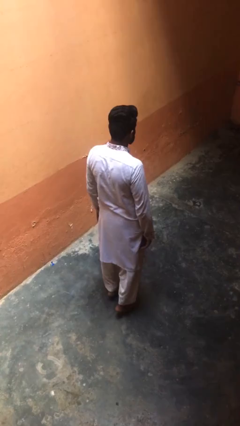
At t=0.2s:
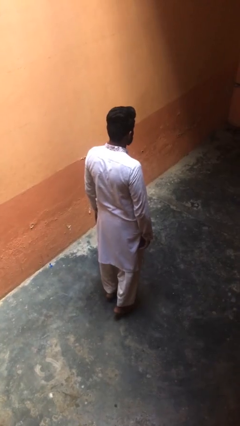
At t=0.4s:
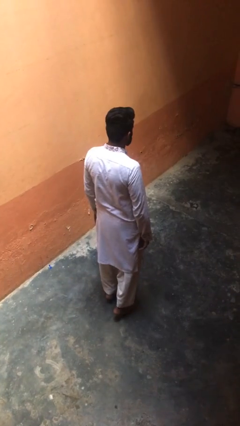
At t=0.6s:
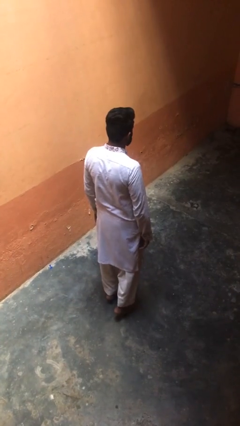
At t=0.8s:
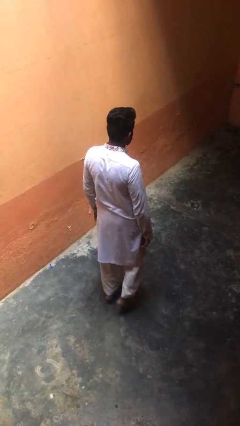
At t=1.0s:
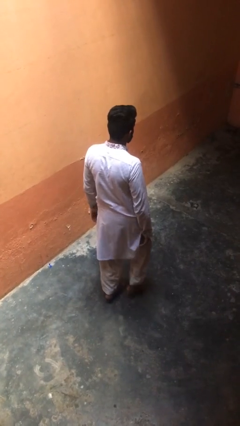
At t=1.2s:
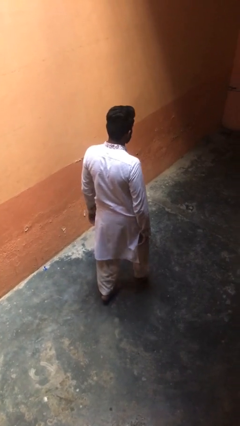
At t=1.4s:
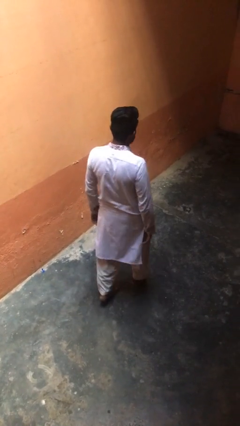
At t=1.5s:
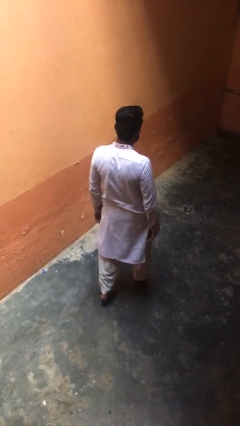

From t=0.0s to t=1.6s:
person walks tiptoe

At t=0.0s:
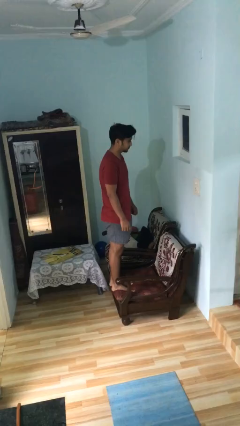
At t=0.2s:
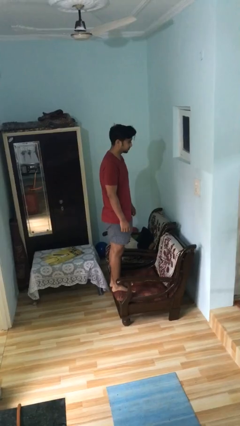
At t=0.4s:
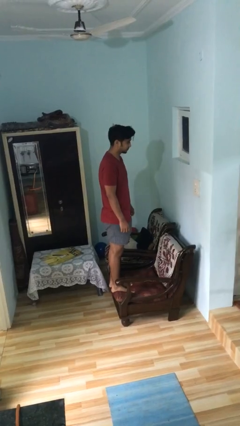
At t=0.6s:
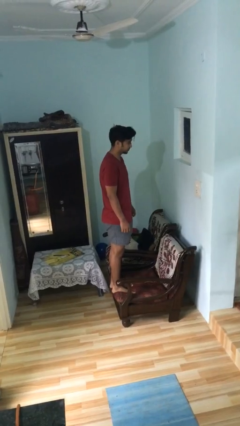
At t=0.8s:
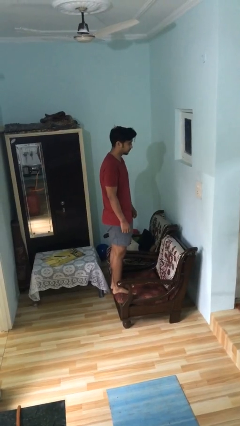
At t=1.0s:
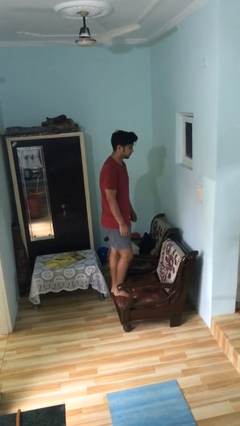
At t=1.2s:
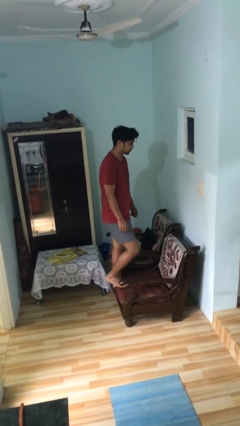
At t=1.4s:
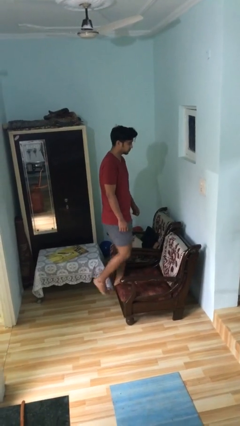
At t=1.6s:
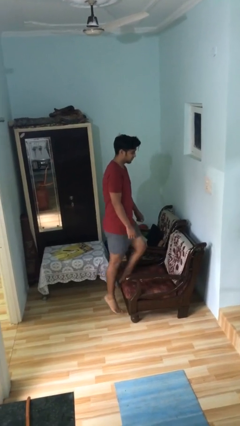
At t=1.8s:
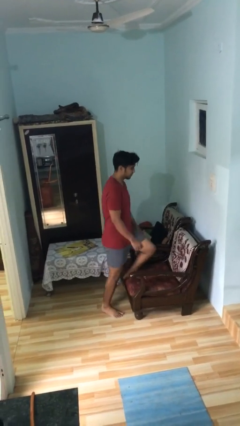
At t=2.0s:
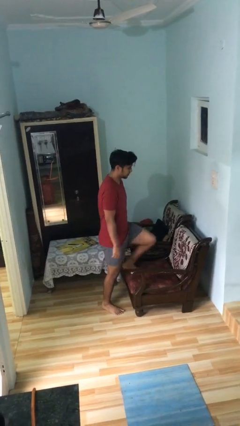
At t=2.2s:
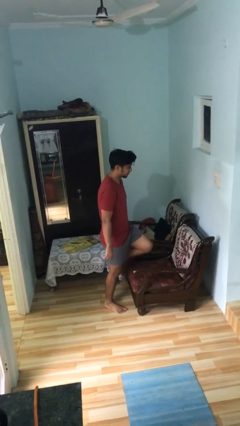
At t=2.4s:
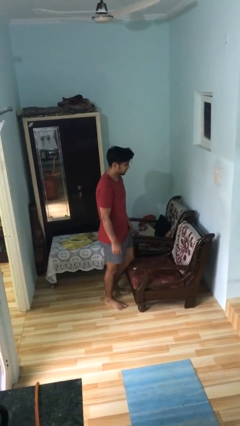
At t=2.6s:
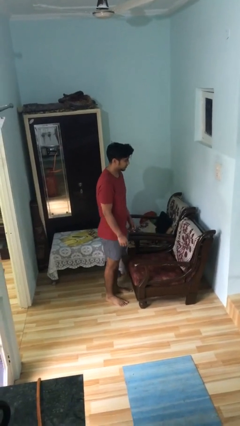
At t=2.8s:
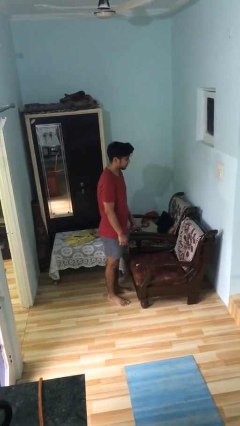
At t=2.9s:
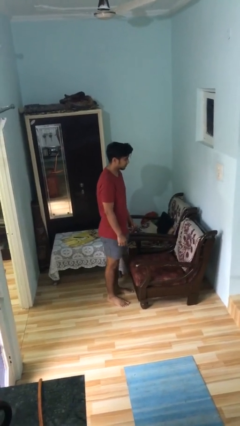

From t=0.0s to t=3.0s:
person climbs off couch

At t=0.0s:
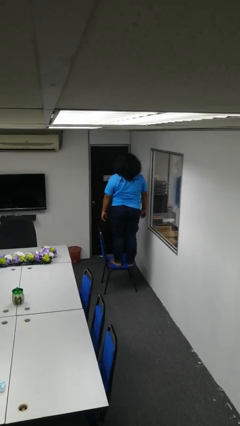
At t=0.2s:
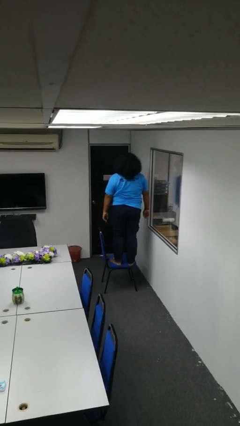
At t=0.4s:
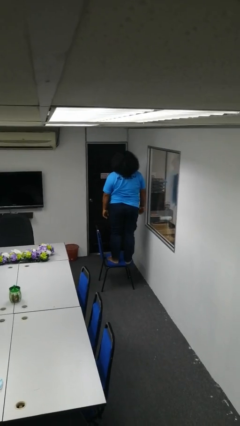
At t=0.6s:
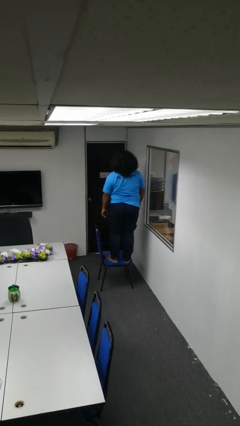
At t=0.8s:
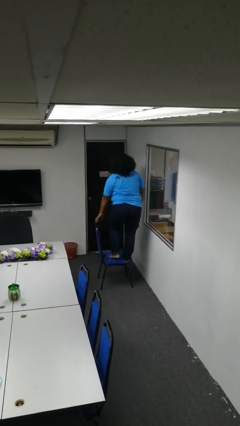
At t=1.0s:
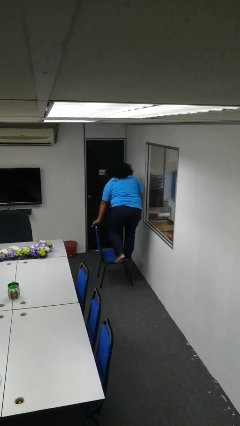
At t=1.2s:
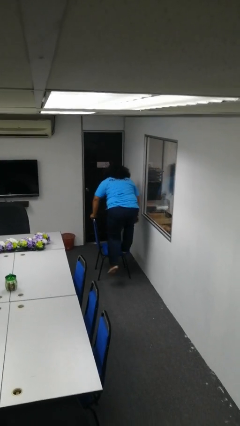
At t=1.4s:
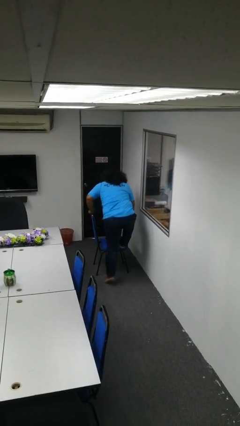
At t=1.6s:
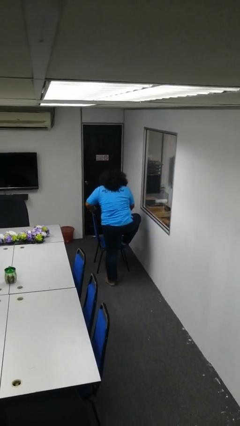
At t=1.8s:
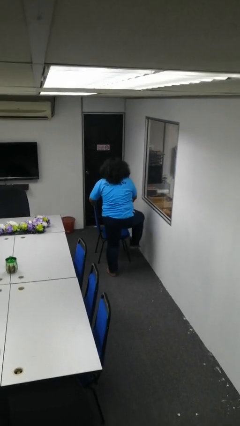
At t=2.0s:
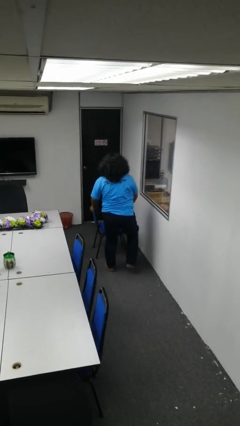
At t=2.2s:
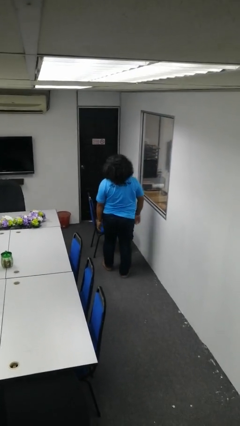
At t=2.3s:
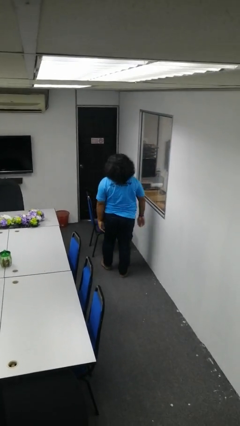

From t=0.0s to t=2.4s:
person climbs off chair

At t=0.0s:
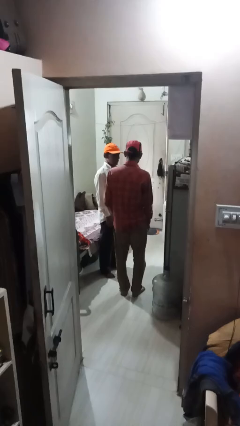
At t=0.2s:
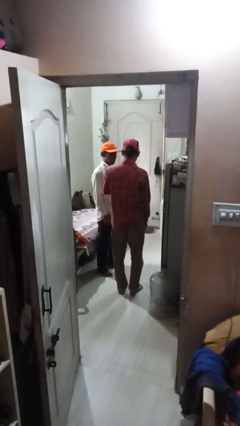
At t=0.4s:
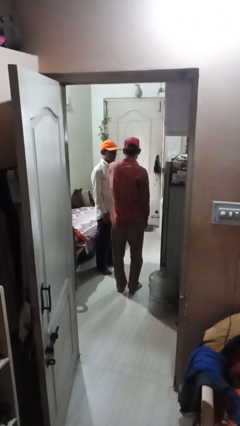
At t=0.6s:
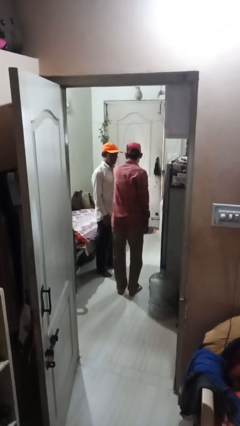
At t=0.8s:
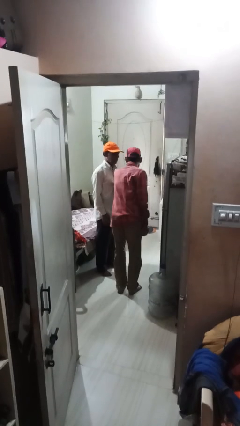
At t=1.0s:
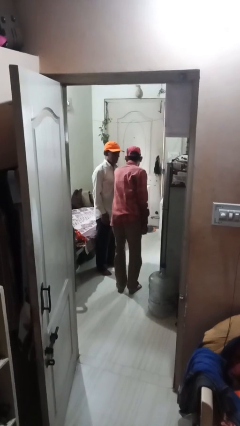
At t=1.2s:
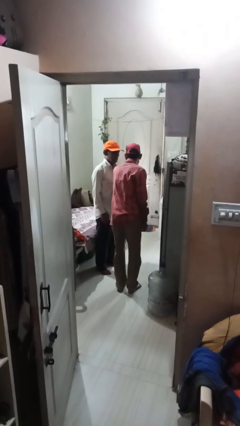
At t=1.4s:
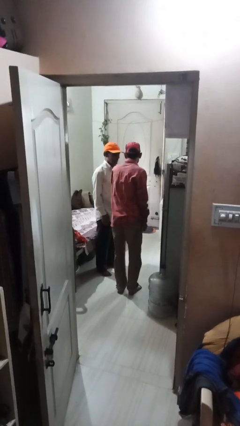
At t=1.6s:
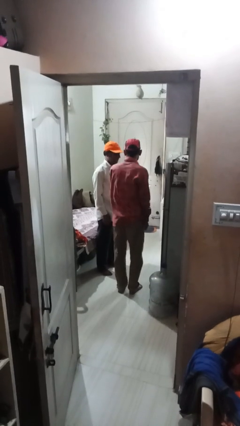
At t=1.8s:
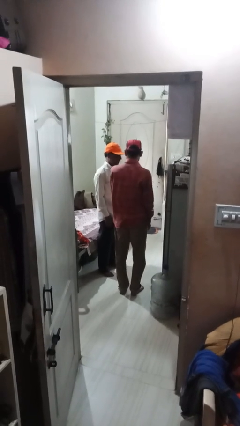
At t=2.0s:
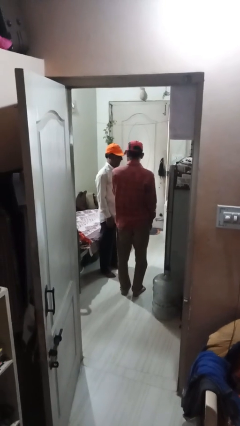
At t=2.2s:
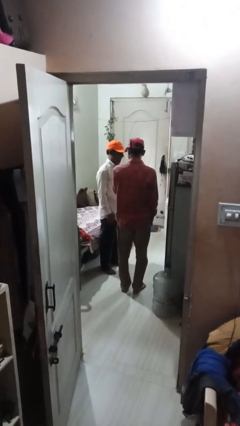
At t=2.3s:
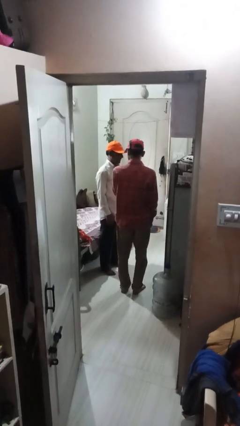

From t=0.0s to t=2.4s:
person nudges person with elbow

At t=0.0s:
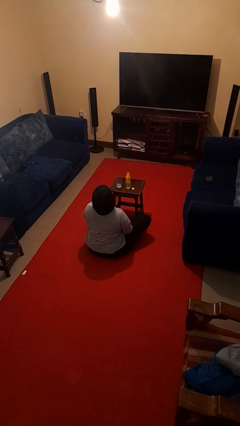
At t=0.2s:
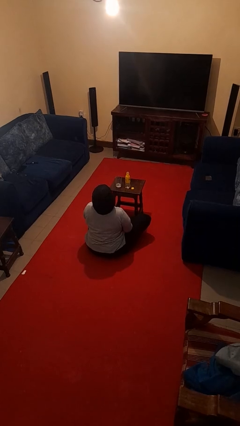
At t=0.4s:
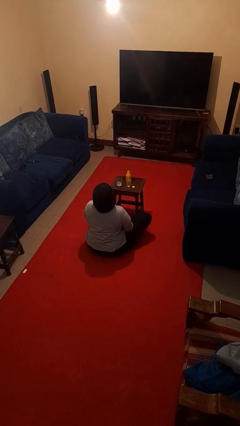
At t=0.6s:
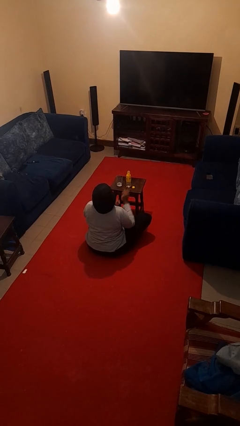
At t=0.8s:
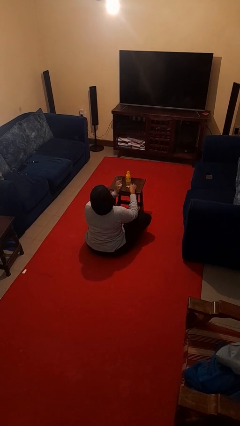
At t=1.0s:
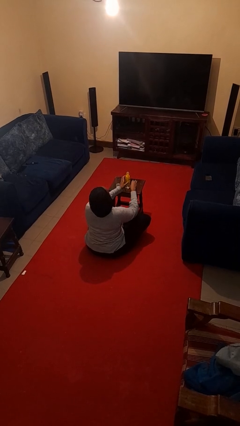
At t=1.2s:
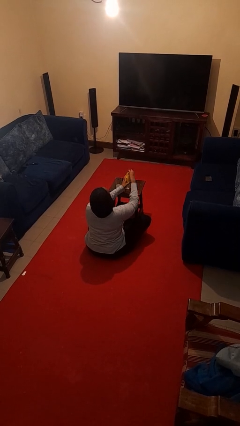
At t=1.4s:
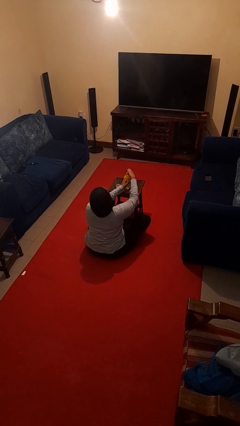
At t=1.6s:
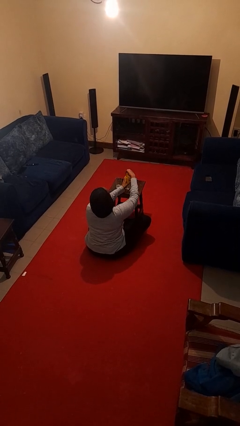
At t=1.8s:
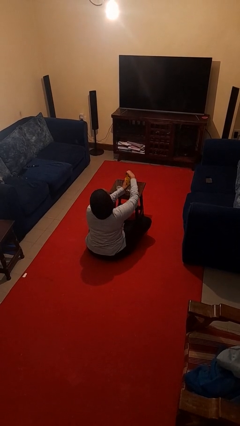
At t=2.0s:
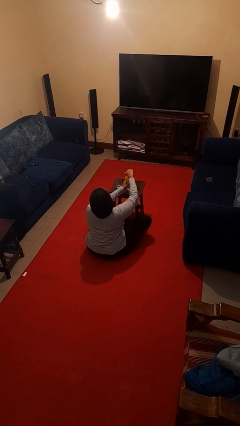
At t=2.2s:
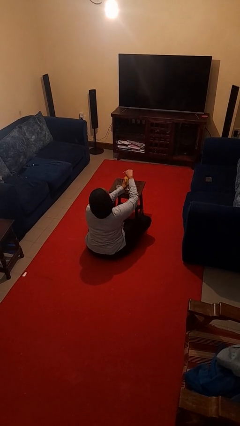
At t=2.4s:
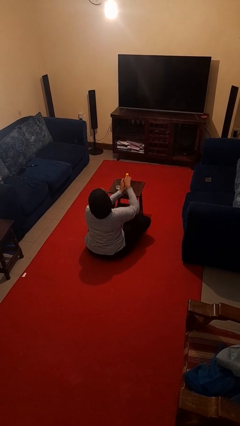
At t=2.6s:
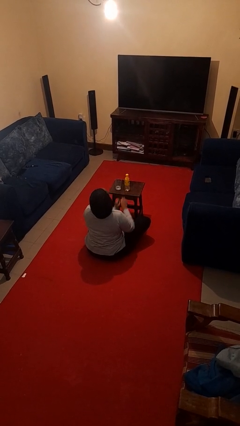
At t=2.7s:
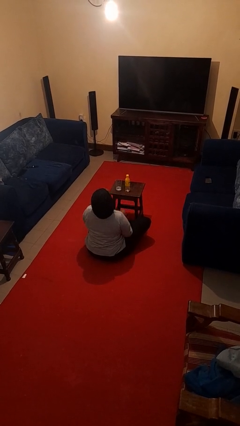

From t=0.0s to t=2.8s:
person screws lid to bottle

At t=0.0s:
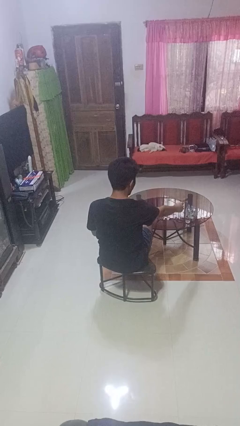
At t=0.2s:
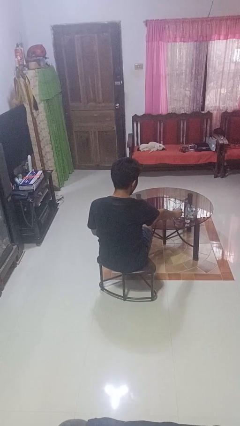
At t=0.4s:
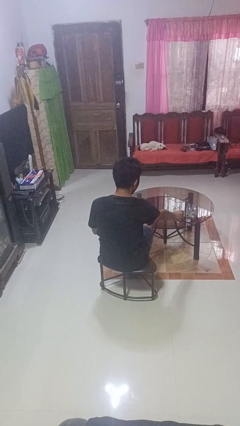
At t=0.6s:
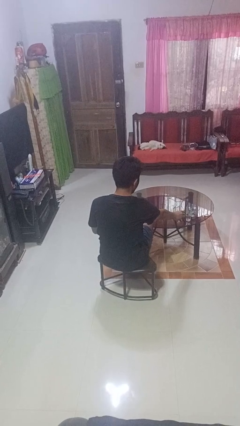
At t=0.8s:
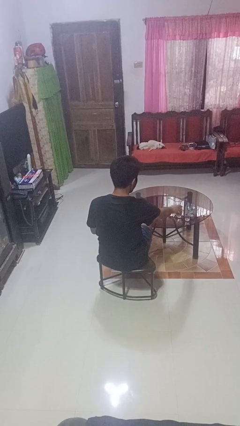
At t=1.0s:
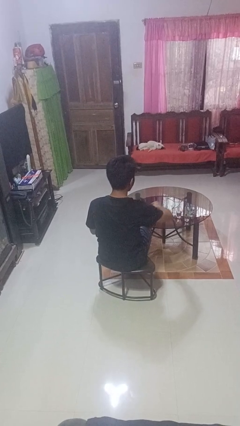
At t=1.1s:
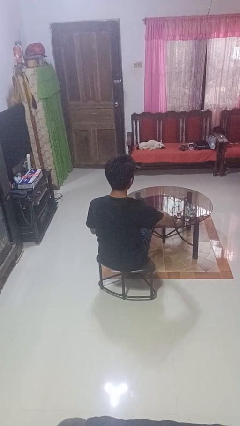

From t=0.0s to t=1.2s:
person puts down object on table

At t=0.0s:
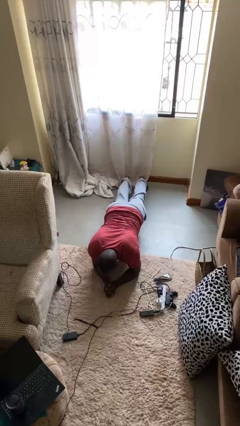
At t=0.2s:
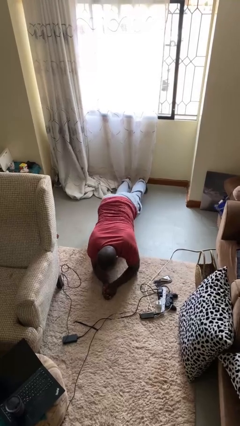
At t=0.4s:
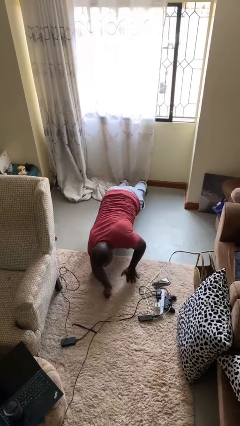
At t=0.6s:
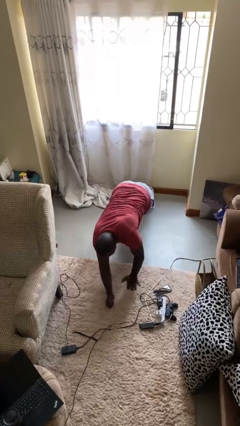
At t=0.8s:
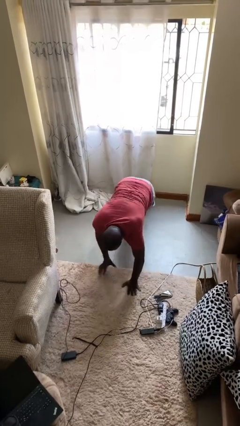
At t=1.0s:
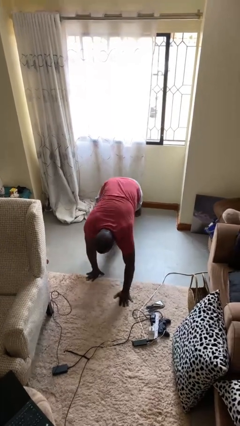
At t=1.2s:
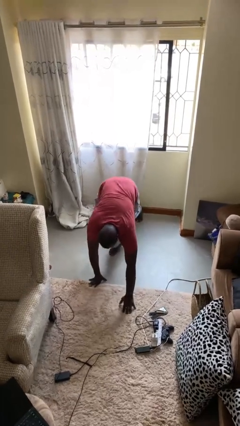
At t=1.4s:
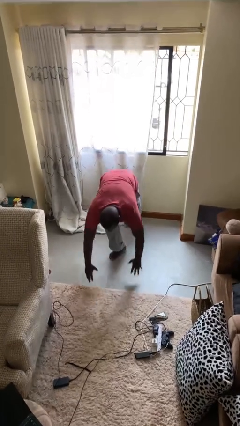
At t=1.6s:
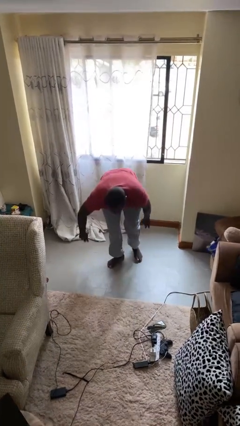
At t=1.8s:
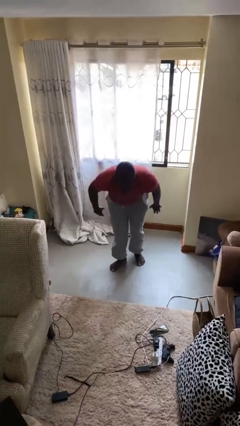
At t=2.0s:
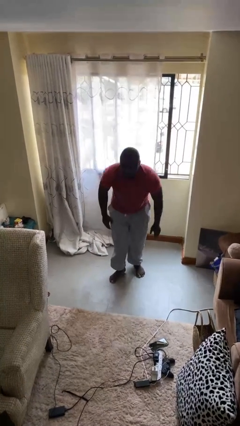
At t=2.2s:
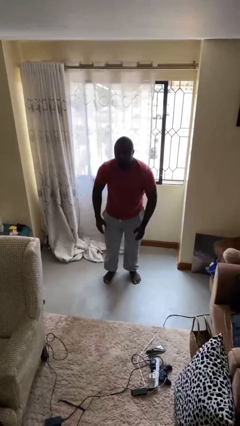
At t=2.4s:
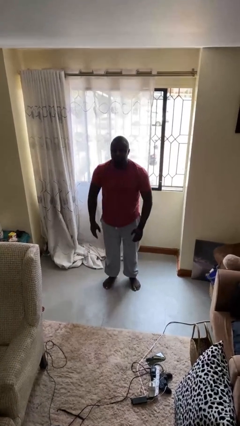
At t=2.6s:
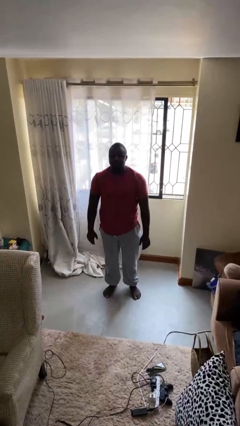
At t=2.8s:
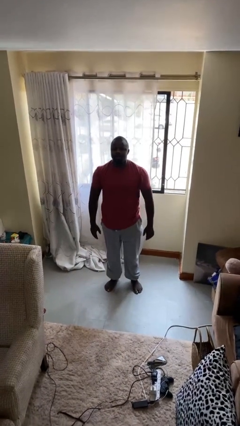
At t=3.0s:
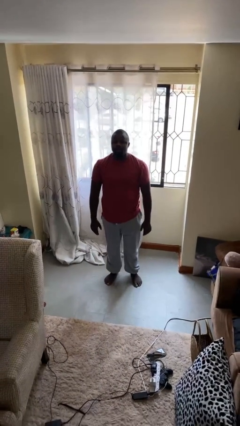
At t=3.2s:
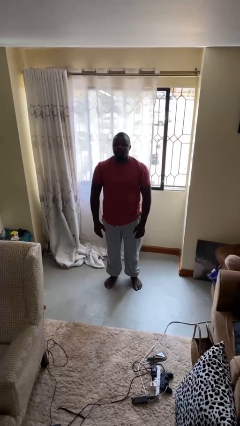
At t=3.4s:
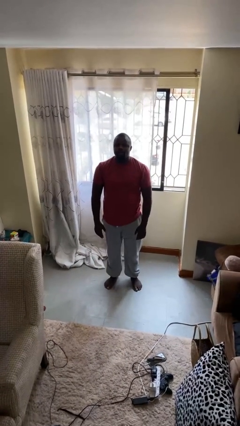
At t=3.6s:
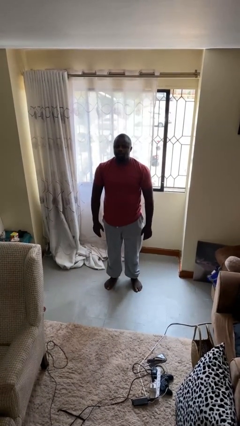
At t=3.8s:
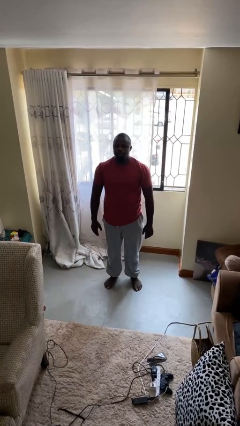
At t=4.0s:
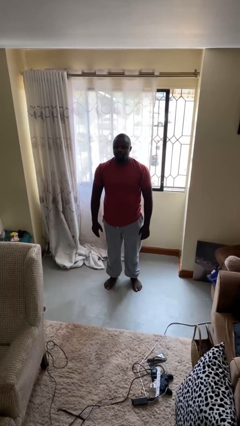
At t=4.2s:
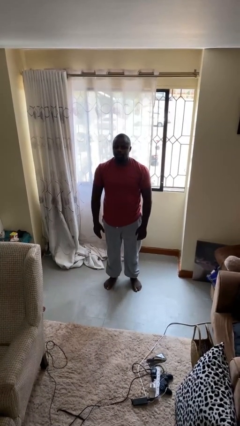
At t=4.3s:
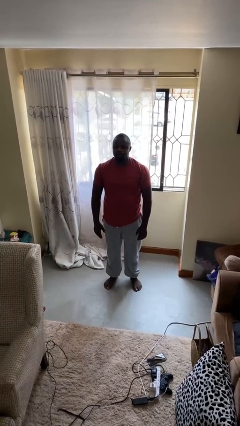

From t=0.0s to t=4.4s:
person stands up from floor
